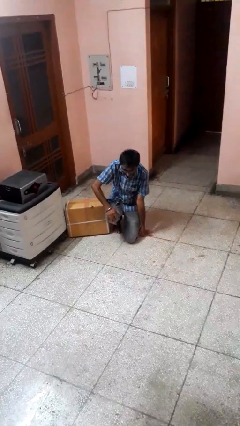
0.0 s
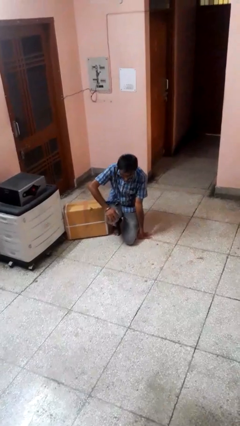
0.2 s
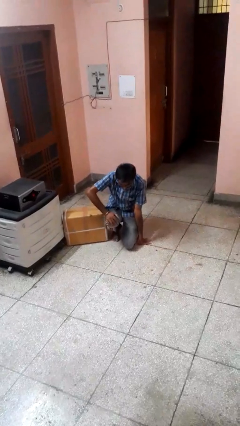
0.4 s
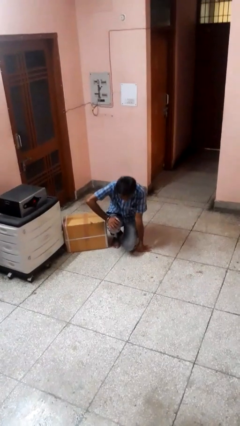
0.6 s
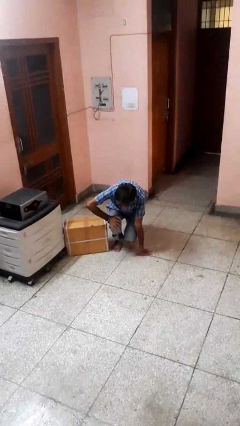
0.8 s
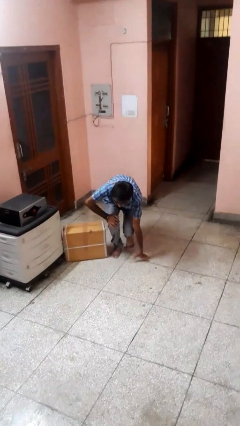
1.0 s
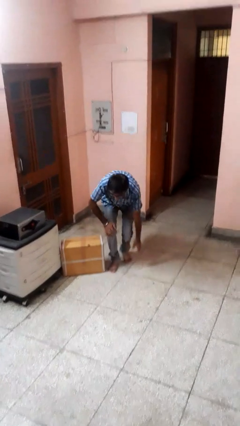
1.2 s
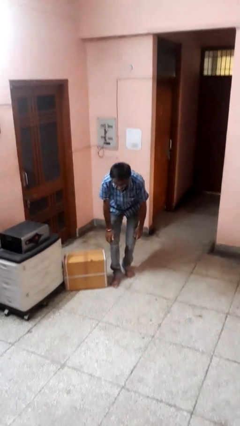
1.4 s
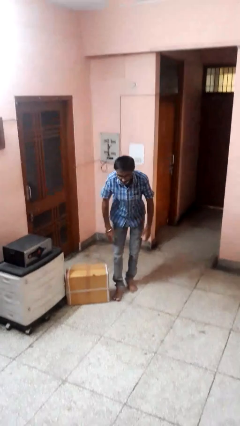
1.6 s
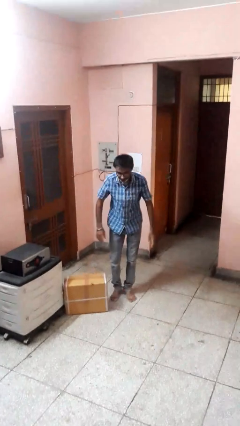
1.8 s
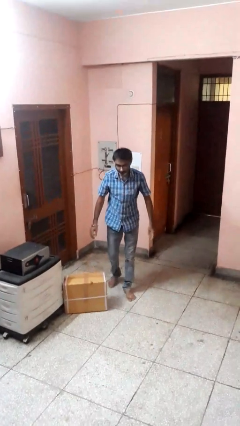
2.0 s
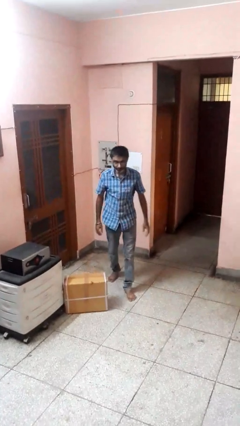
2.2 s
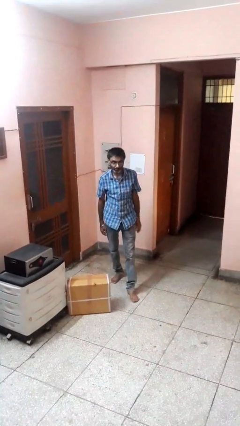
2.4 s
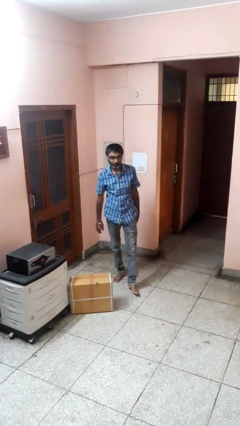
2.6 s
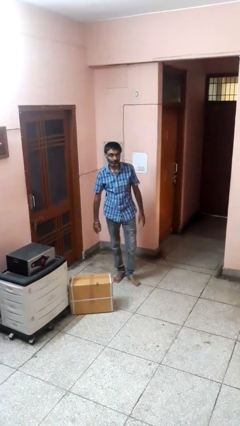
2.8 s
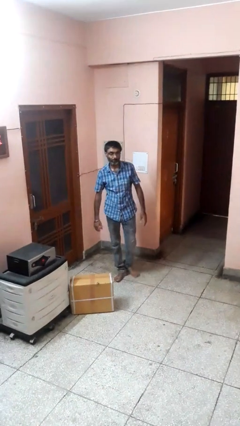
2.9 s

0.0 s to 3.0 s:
person stands up from floor

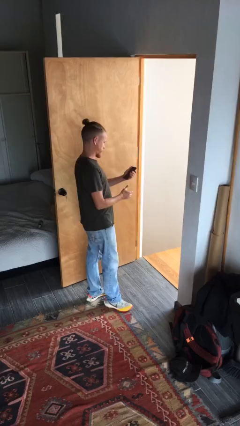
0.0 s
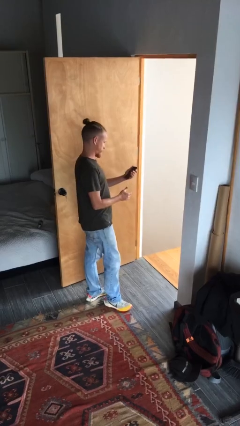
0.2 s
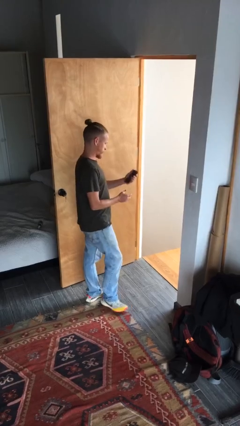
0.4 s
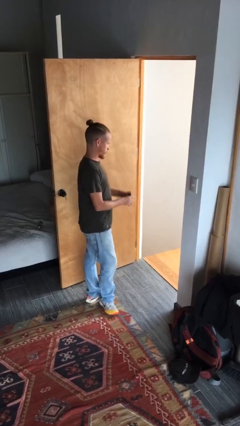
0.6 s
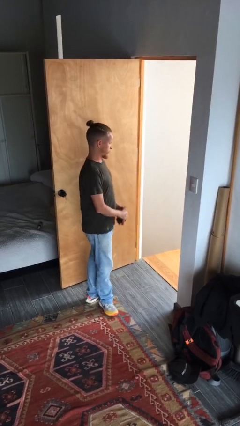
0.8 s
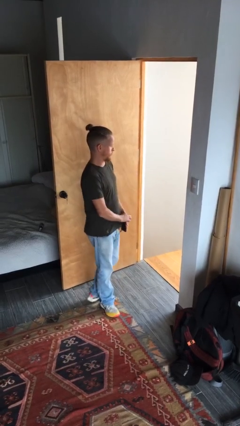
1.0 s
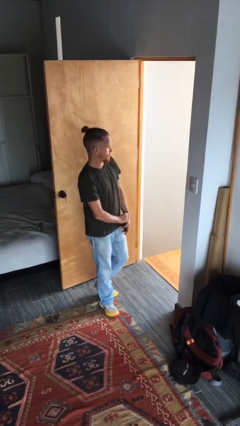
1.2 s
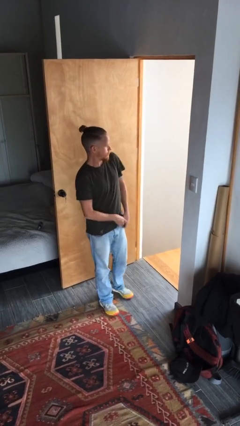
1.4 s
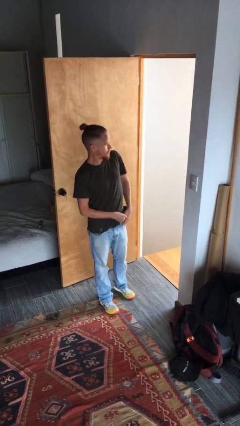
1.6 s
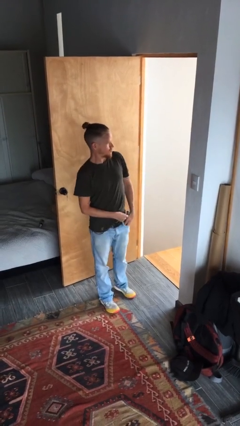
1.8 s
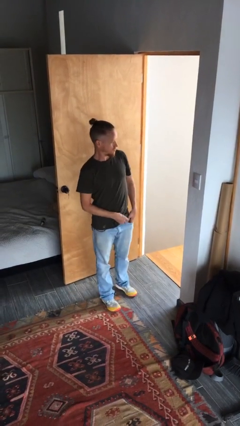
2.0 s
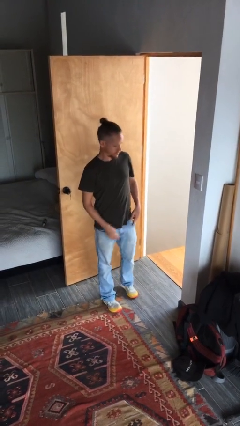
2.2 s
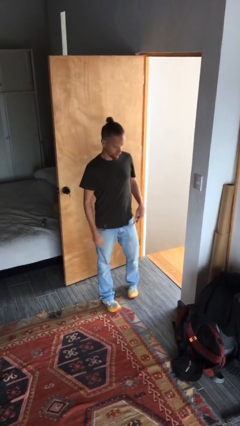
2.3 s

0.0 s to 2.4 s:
person puts phone into pocket

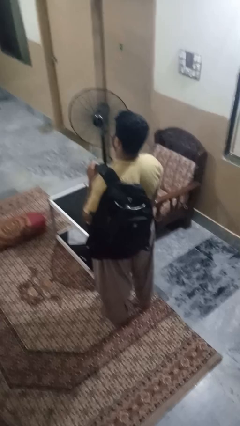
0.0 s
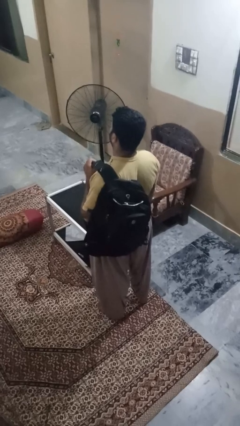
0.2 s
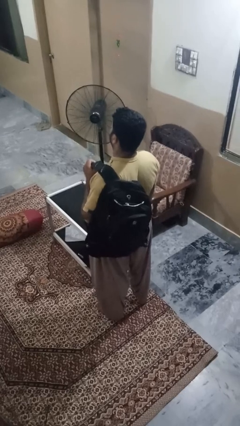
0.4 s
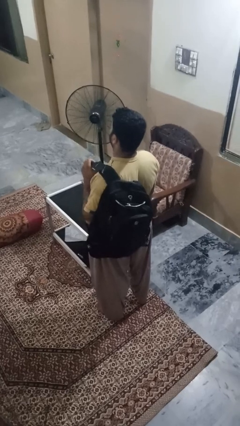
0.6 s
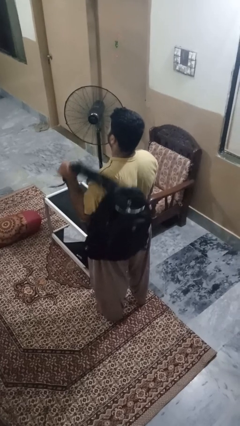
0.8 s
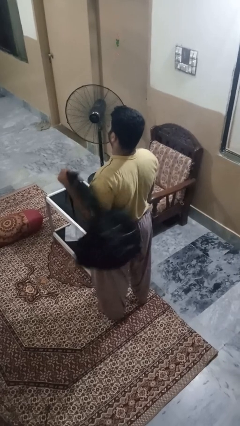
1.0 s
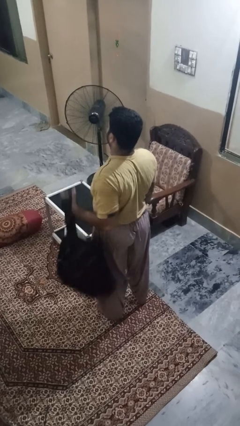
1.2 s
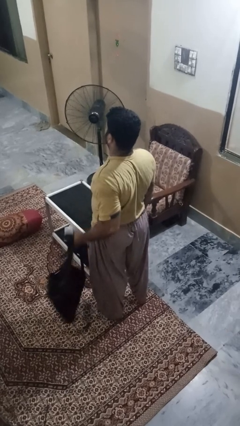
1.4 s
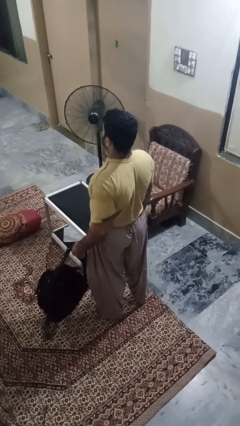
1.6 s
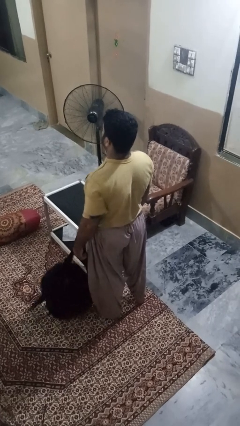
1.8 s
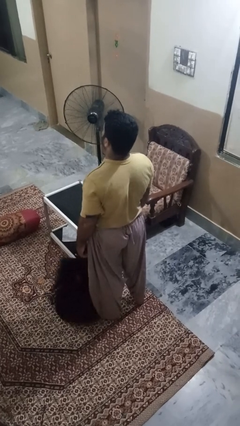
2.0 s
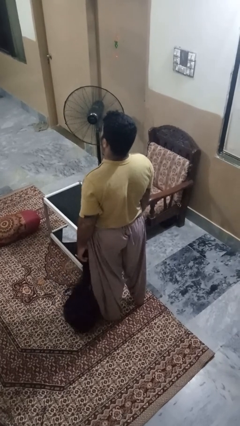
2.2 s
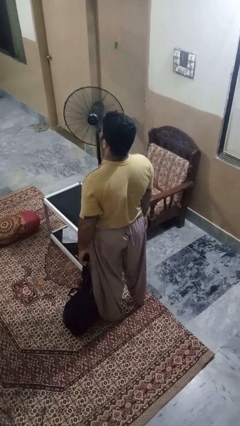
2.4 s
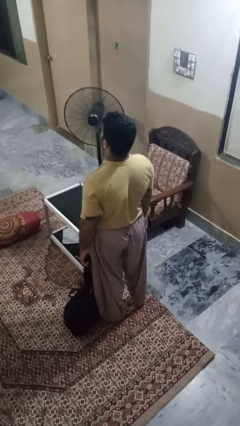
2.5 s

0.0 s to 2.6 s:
person takes off backpack

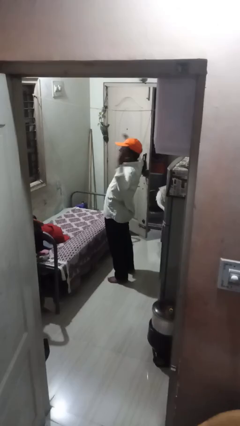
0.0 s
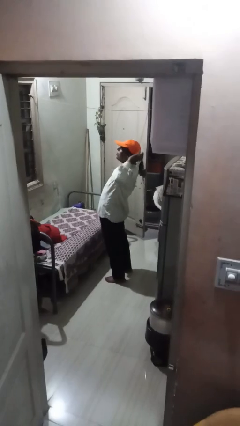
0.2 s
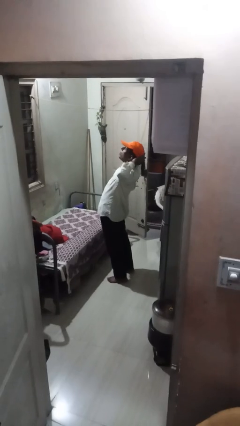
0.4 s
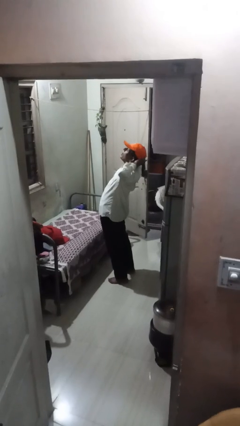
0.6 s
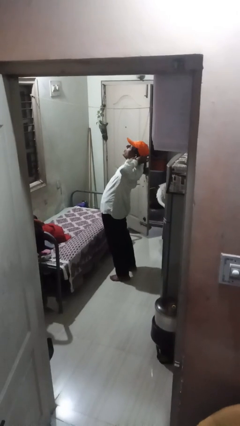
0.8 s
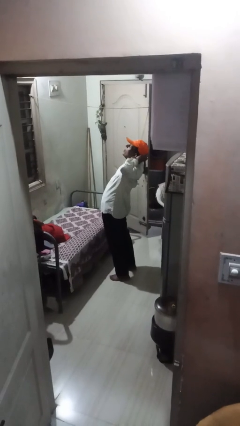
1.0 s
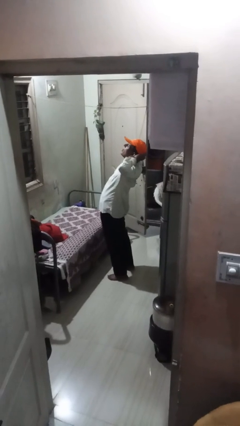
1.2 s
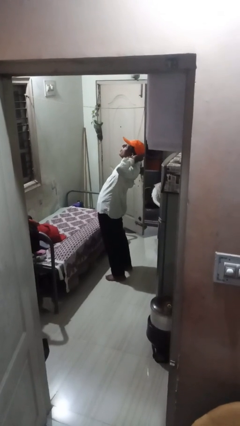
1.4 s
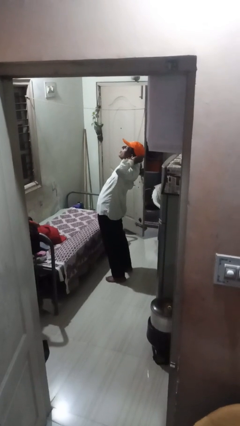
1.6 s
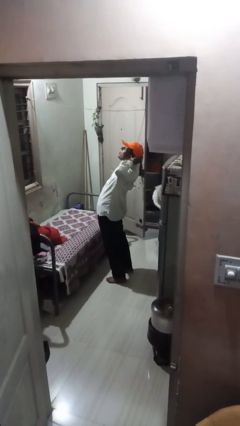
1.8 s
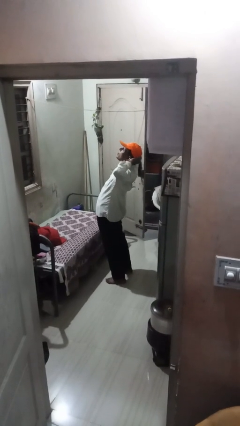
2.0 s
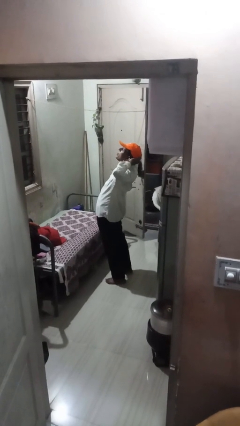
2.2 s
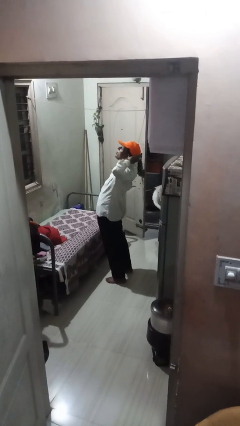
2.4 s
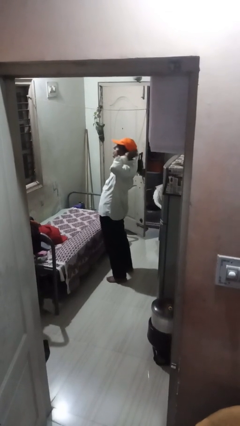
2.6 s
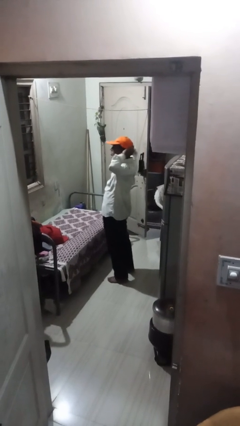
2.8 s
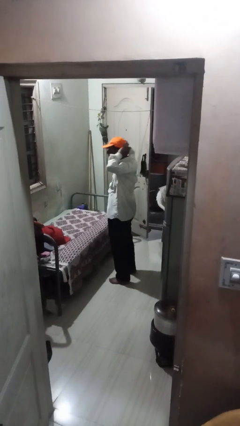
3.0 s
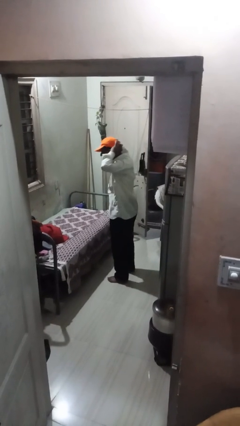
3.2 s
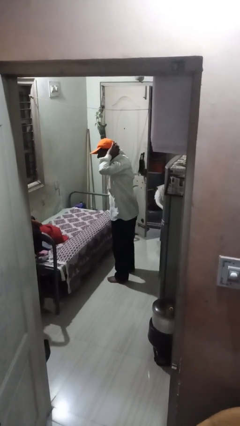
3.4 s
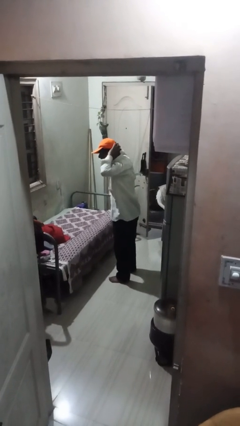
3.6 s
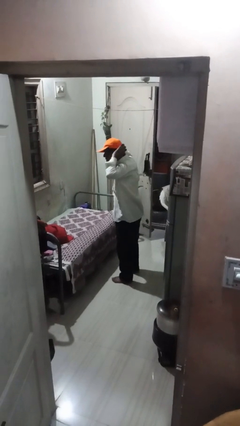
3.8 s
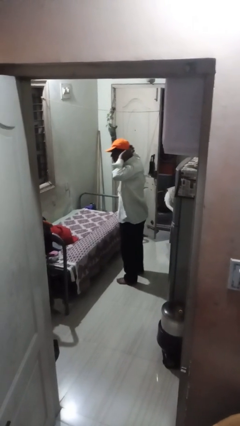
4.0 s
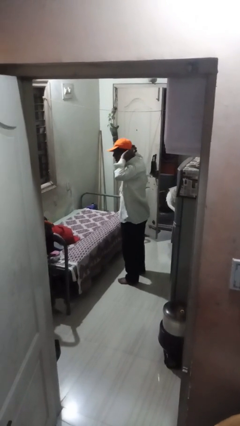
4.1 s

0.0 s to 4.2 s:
person stretches arms over head

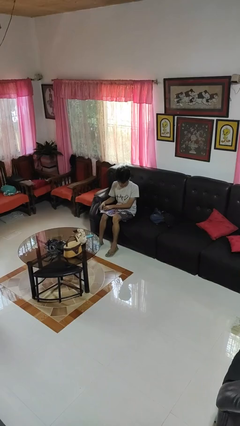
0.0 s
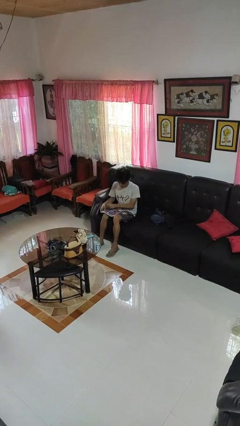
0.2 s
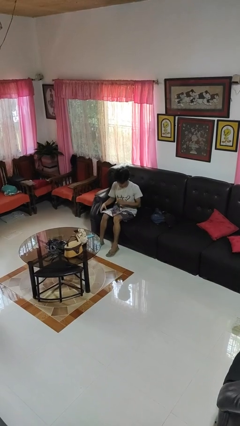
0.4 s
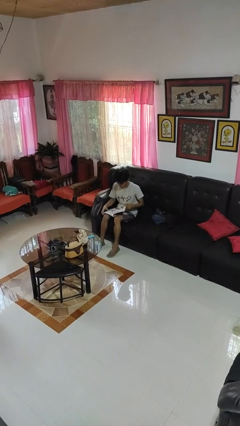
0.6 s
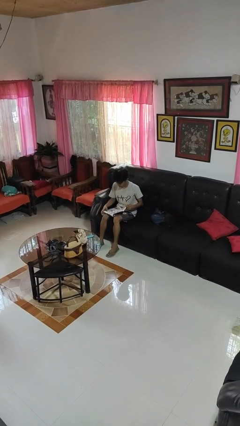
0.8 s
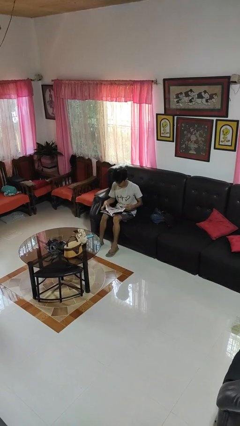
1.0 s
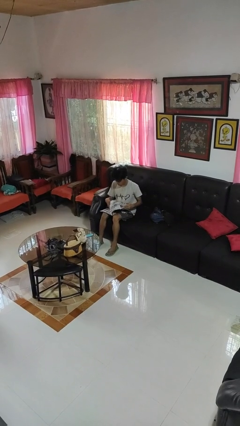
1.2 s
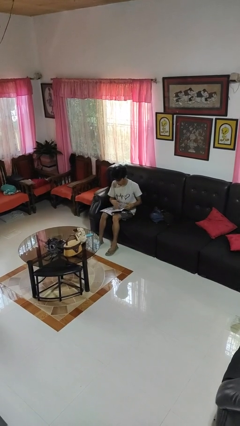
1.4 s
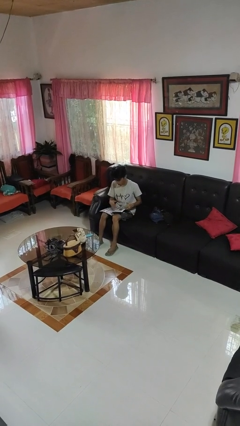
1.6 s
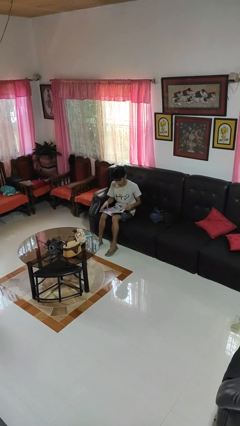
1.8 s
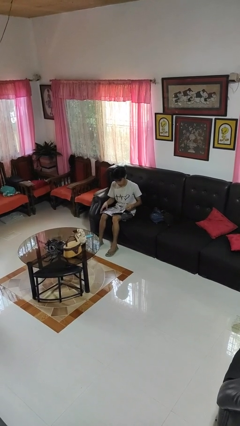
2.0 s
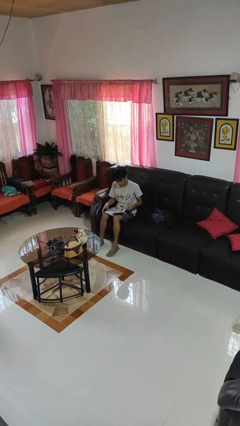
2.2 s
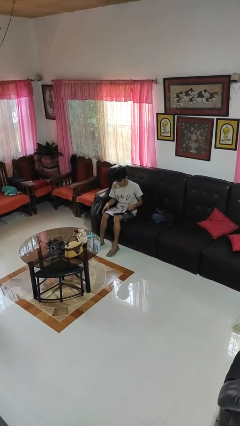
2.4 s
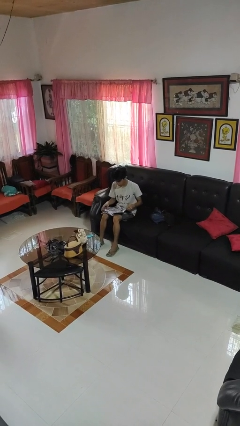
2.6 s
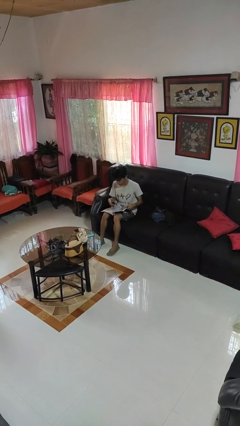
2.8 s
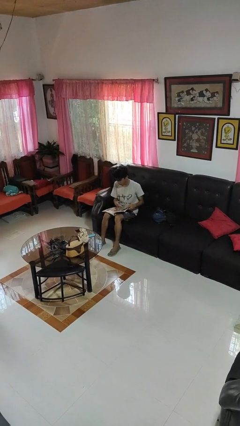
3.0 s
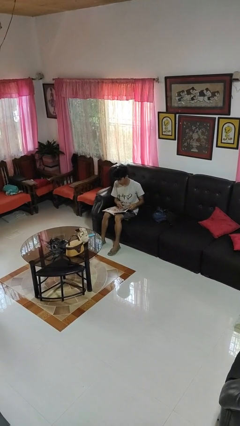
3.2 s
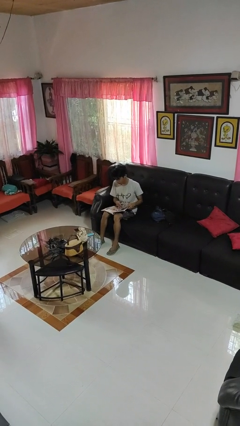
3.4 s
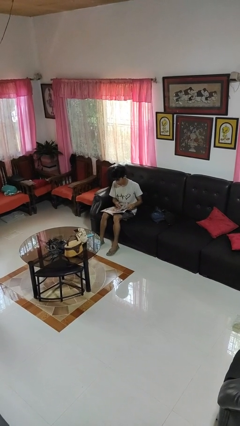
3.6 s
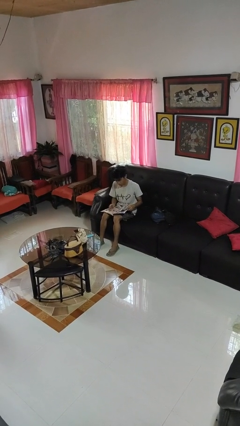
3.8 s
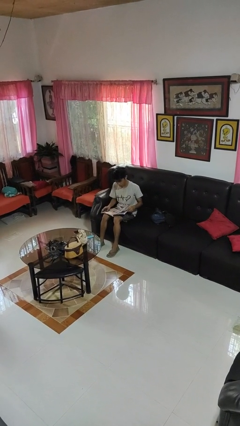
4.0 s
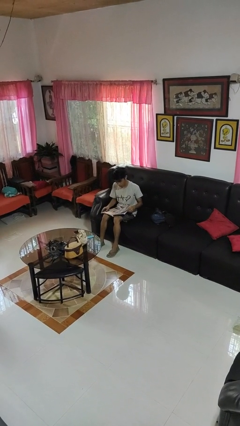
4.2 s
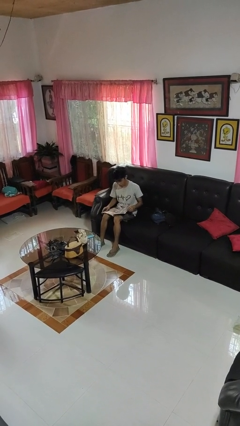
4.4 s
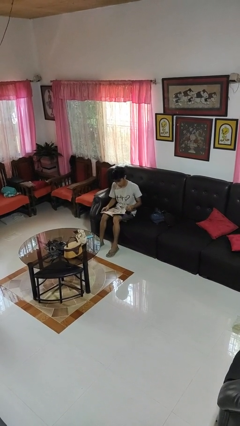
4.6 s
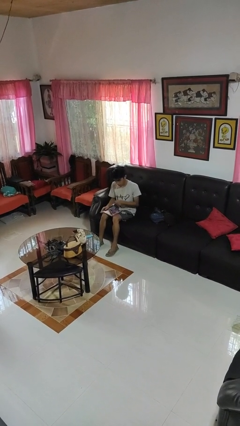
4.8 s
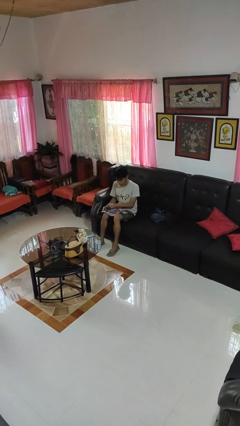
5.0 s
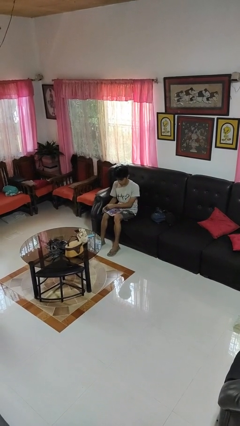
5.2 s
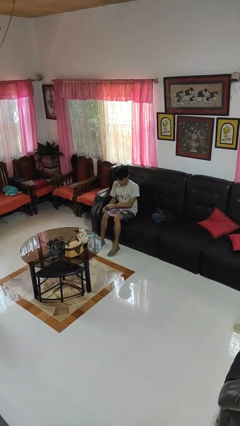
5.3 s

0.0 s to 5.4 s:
person reads magazine

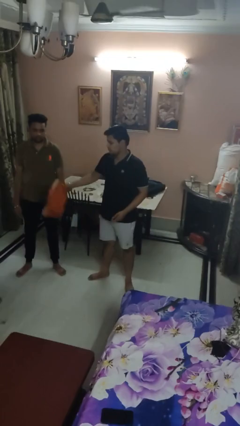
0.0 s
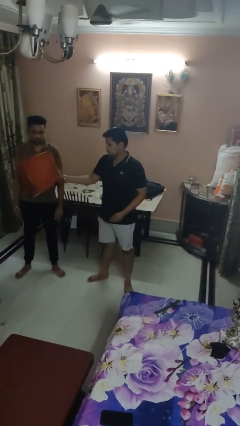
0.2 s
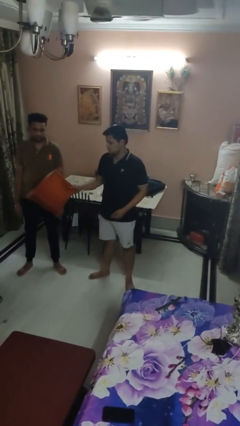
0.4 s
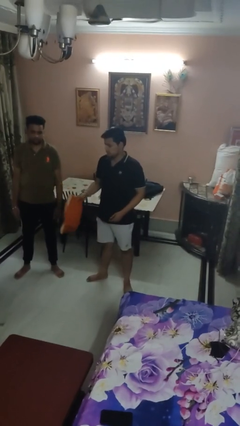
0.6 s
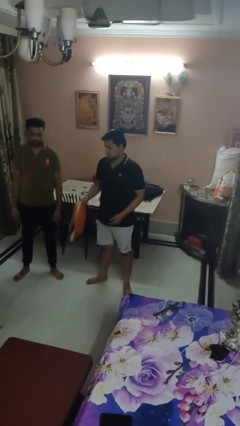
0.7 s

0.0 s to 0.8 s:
person hits person with pillow
